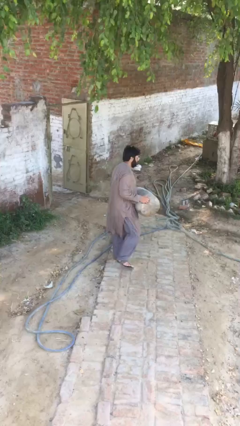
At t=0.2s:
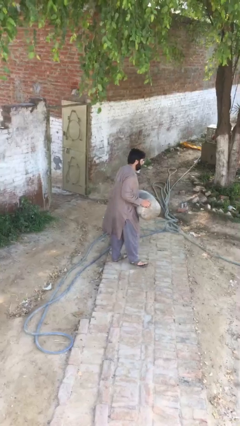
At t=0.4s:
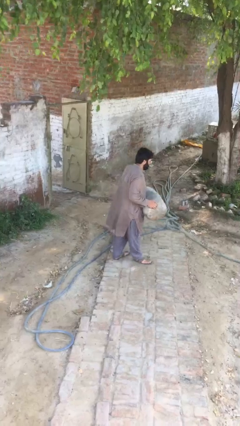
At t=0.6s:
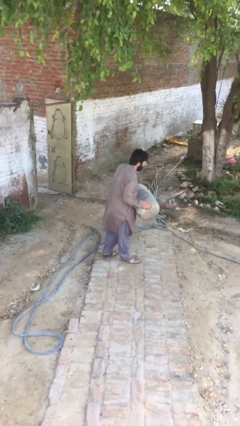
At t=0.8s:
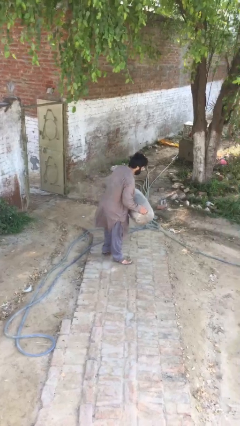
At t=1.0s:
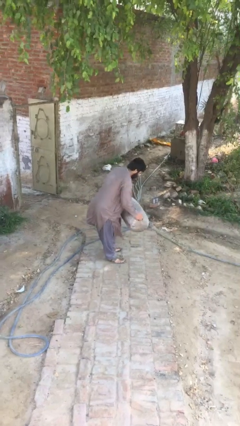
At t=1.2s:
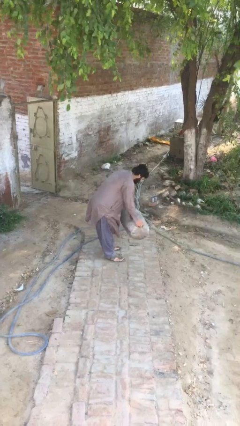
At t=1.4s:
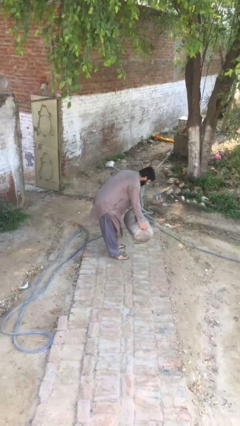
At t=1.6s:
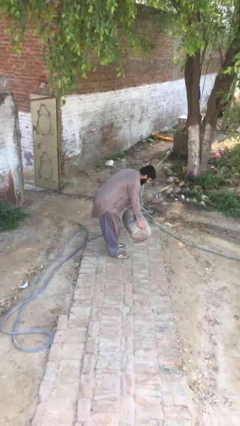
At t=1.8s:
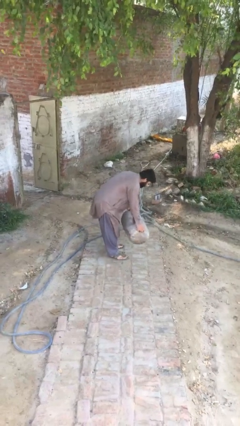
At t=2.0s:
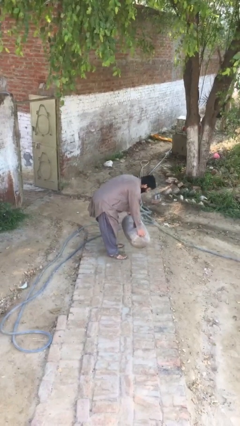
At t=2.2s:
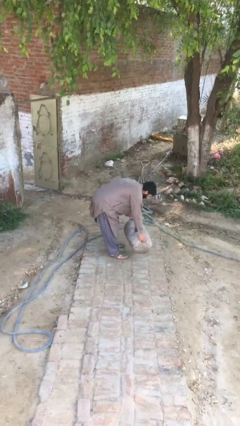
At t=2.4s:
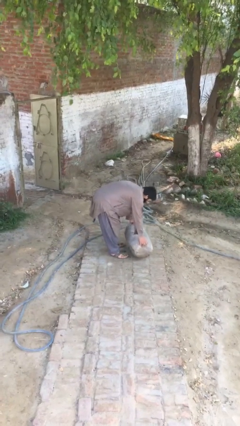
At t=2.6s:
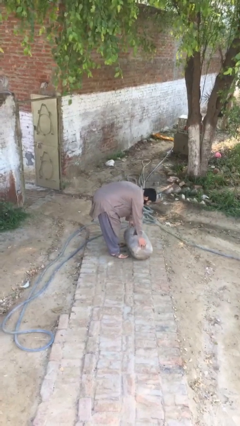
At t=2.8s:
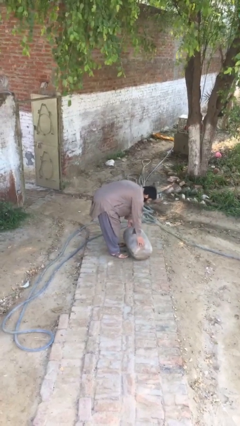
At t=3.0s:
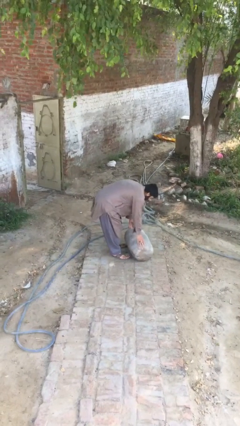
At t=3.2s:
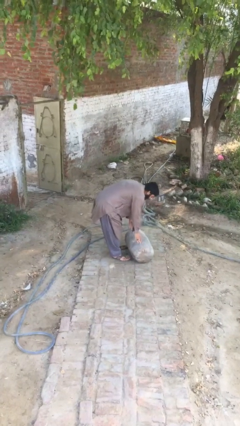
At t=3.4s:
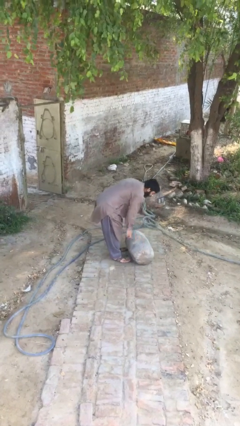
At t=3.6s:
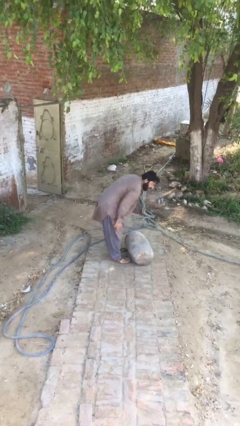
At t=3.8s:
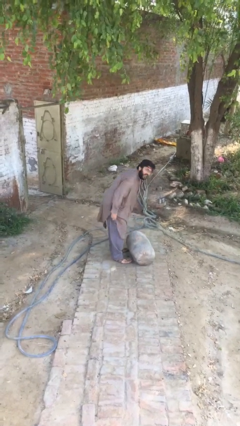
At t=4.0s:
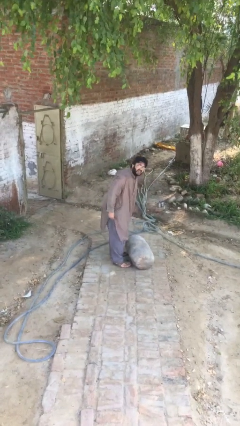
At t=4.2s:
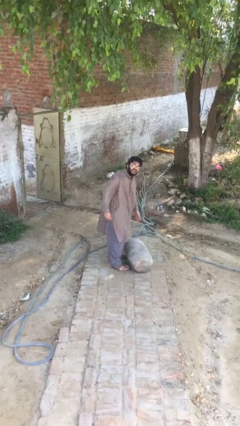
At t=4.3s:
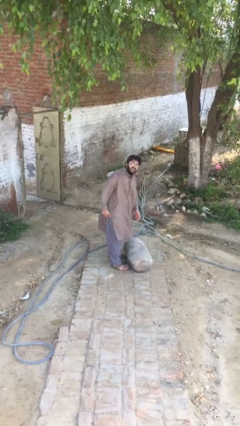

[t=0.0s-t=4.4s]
person puts down object on floor

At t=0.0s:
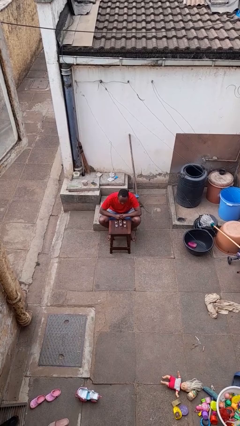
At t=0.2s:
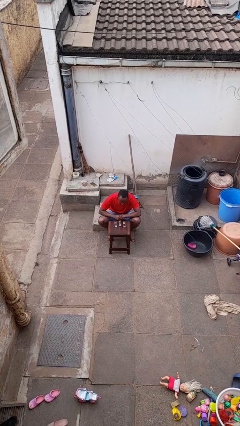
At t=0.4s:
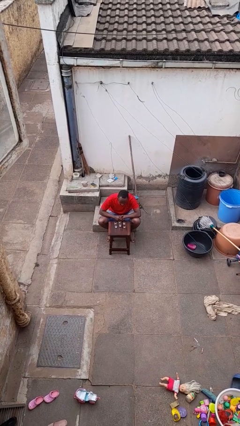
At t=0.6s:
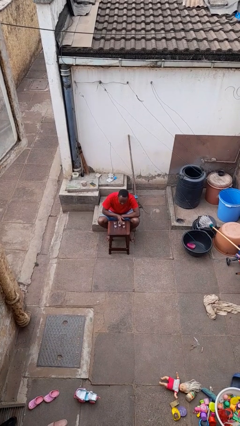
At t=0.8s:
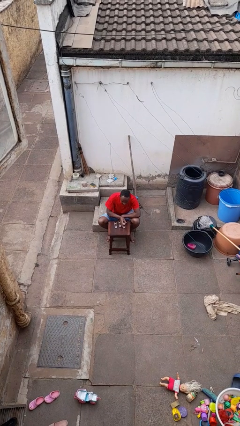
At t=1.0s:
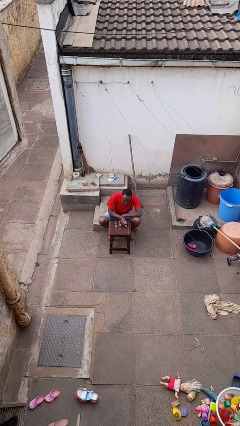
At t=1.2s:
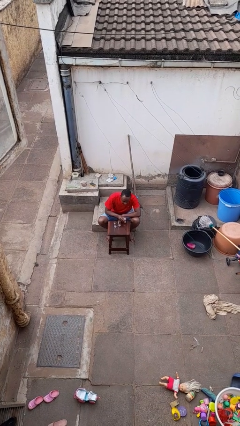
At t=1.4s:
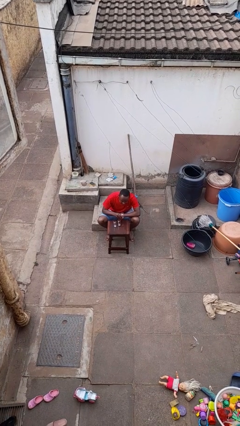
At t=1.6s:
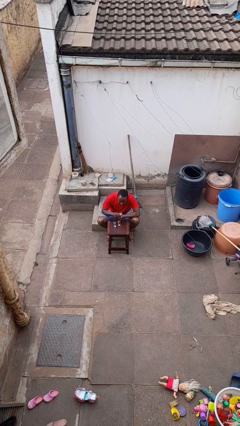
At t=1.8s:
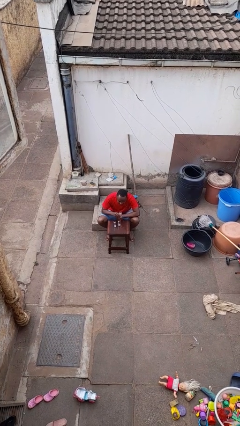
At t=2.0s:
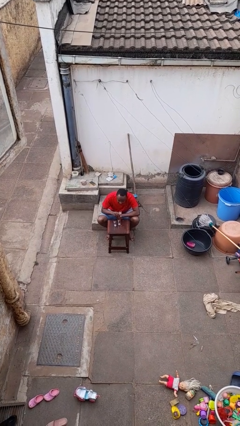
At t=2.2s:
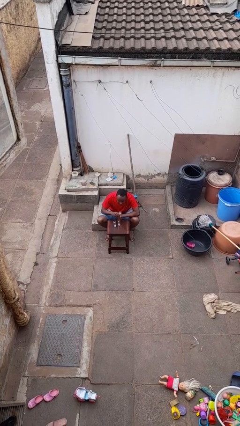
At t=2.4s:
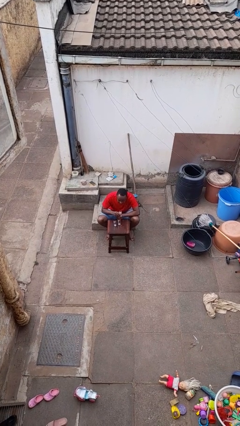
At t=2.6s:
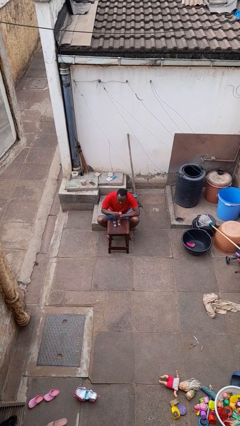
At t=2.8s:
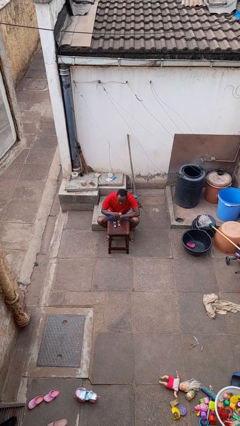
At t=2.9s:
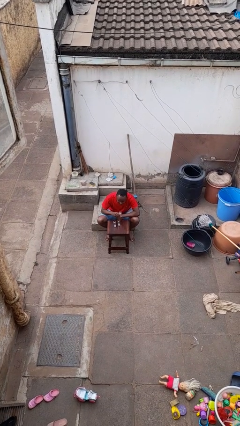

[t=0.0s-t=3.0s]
person picks up object from table

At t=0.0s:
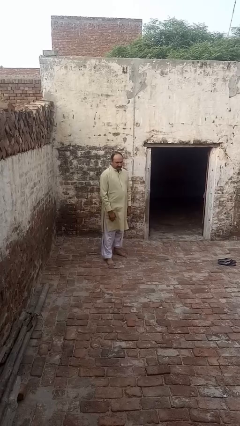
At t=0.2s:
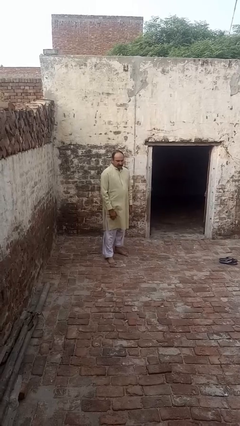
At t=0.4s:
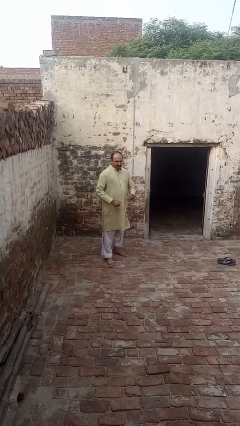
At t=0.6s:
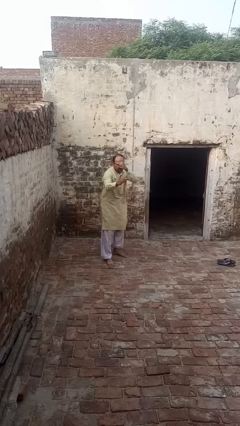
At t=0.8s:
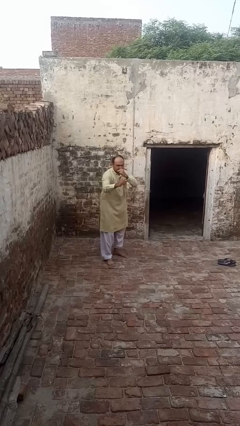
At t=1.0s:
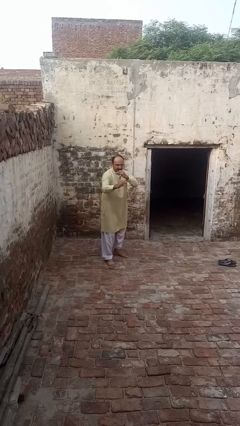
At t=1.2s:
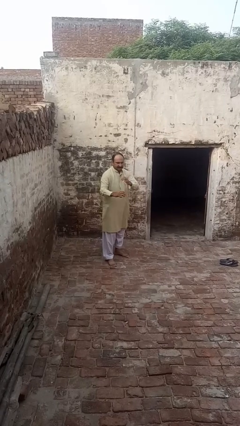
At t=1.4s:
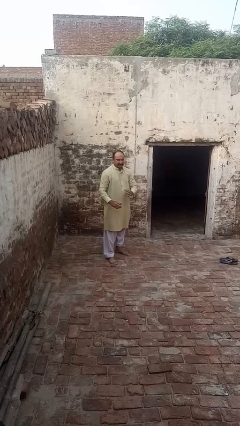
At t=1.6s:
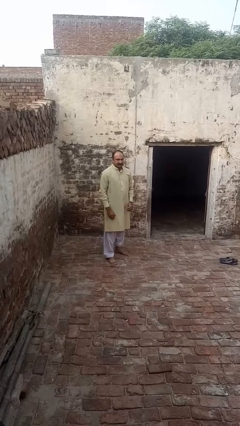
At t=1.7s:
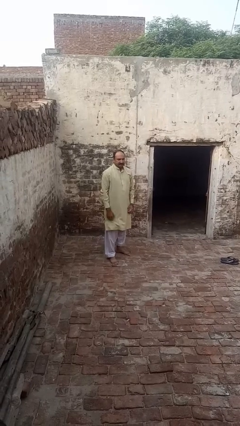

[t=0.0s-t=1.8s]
person karate chop

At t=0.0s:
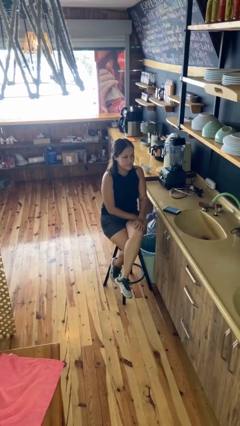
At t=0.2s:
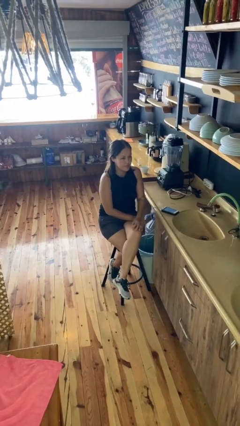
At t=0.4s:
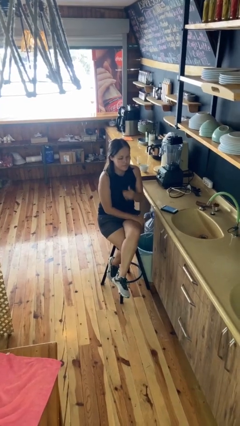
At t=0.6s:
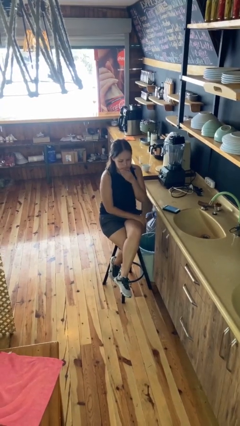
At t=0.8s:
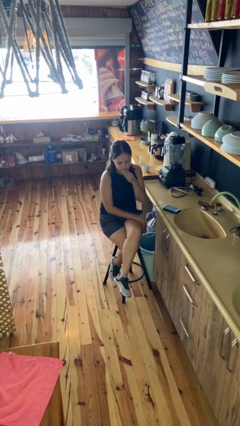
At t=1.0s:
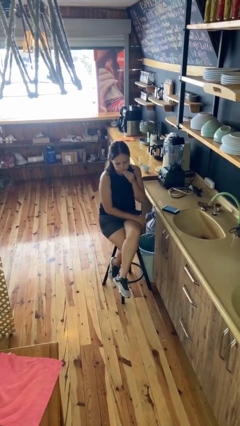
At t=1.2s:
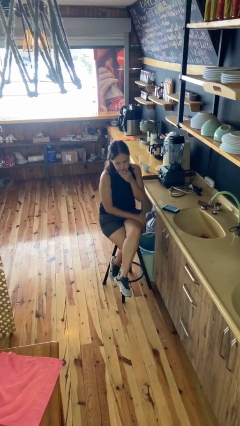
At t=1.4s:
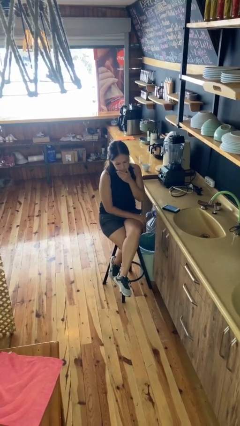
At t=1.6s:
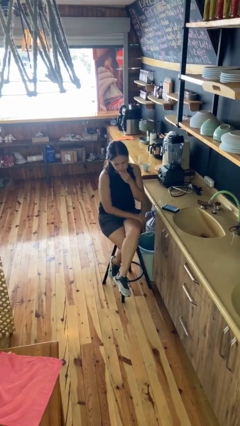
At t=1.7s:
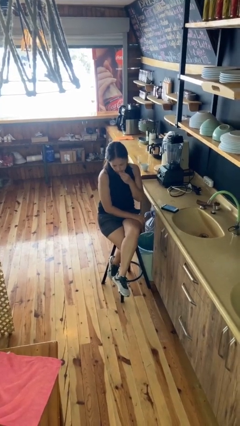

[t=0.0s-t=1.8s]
person strokes chin

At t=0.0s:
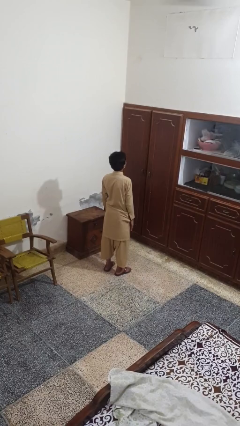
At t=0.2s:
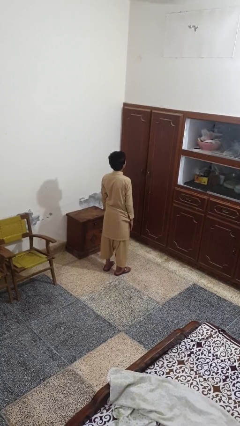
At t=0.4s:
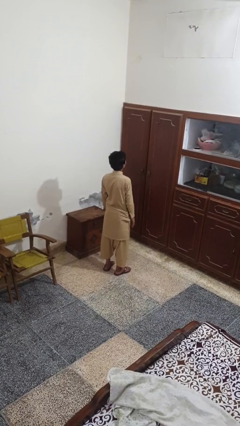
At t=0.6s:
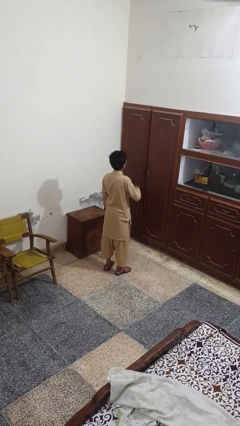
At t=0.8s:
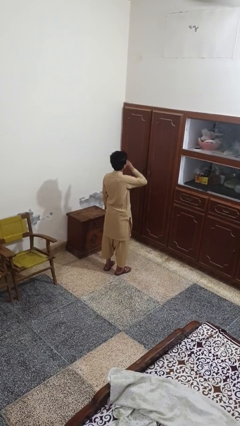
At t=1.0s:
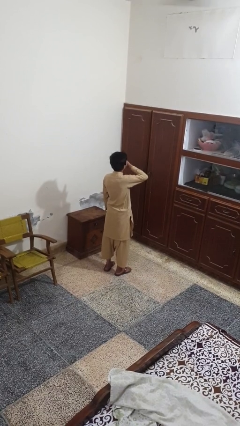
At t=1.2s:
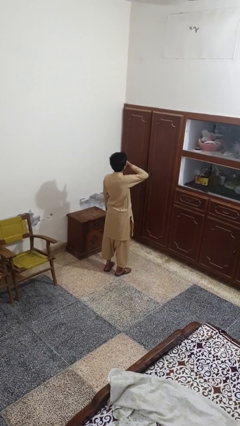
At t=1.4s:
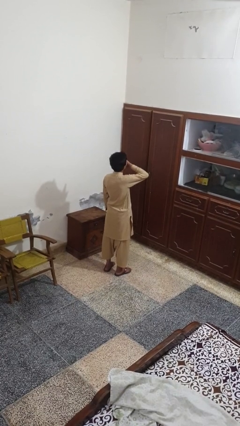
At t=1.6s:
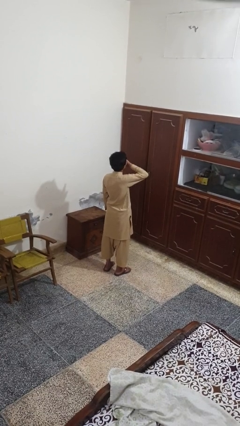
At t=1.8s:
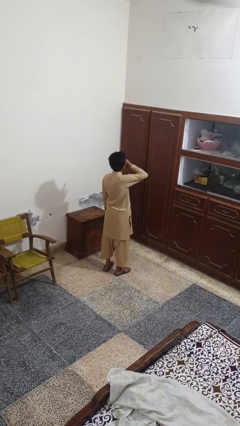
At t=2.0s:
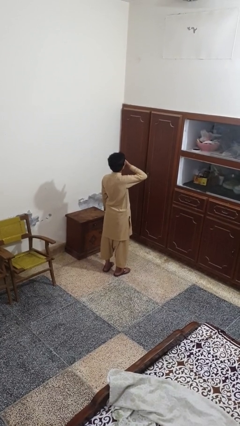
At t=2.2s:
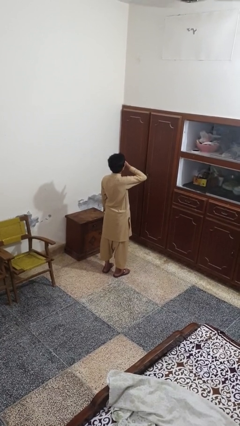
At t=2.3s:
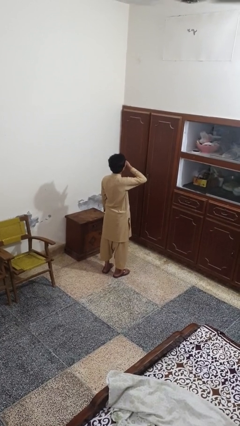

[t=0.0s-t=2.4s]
person yawns

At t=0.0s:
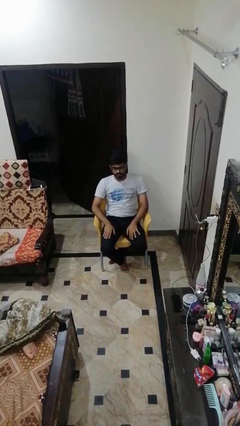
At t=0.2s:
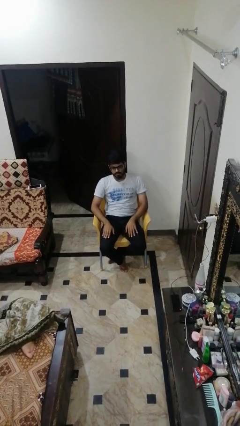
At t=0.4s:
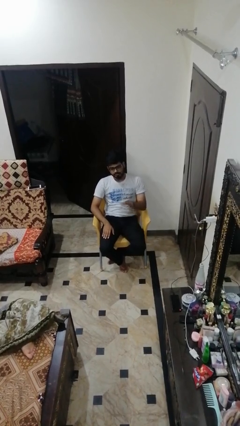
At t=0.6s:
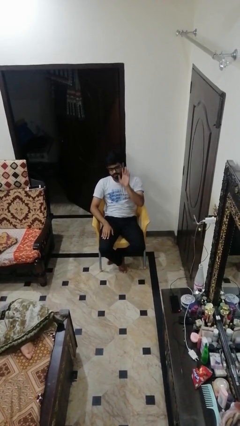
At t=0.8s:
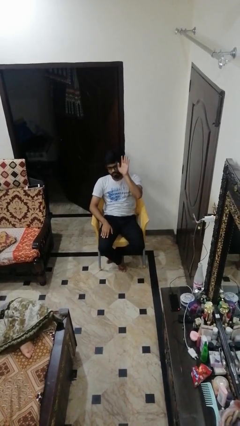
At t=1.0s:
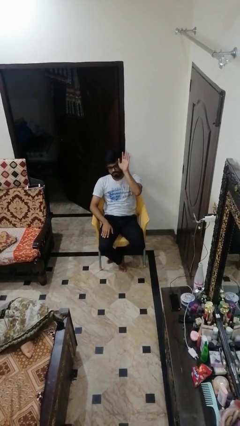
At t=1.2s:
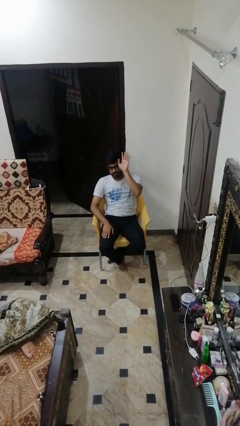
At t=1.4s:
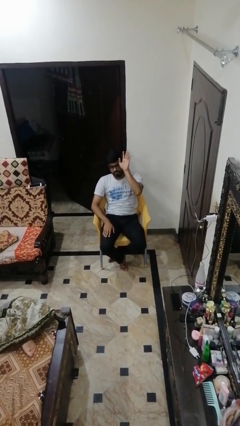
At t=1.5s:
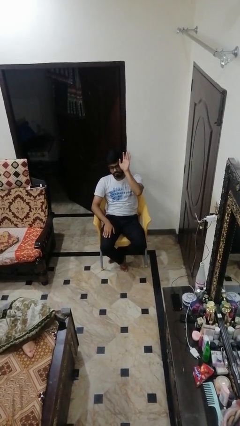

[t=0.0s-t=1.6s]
person gestures raise hand

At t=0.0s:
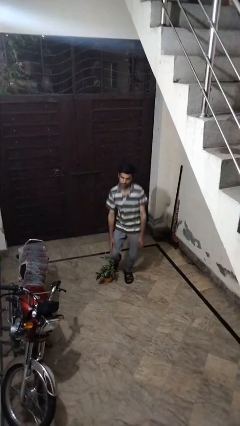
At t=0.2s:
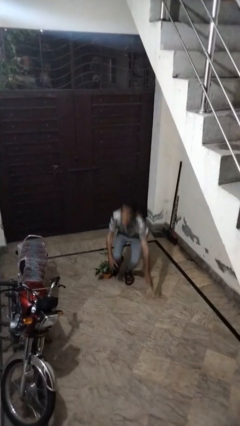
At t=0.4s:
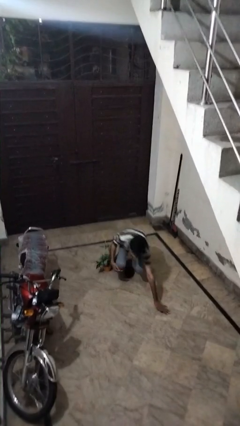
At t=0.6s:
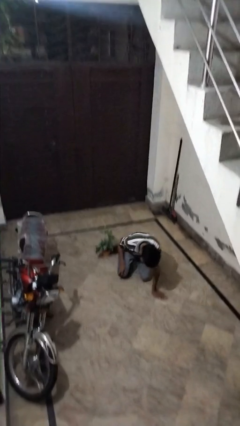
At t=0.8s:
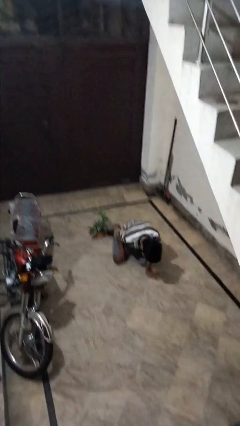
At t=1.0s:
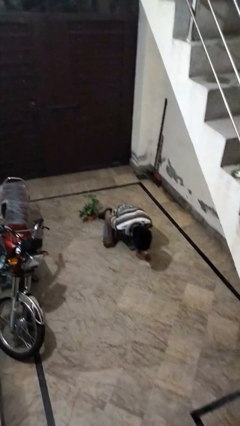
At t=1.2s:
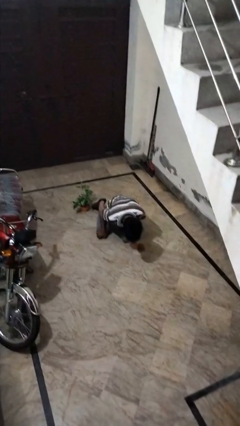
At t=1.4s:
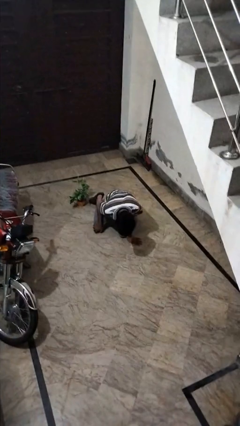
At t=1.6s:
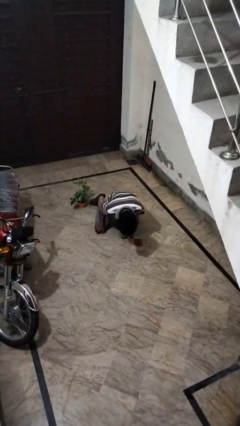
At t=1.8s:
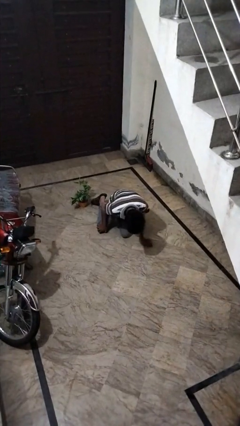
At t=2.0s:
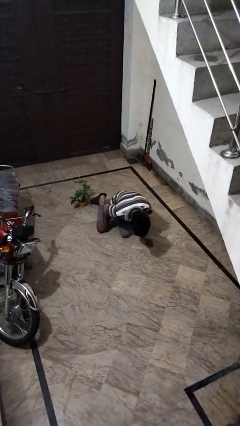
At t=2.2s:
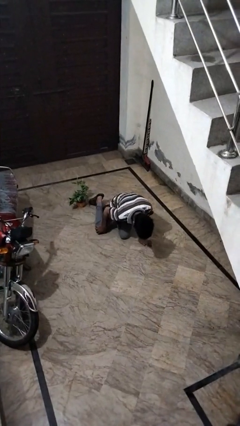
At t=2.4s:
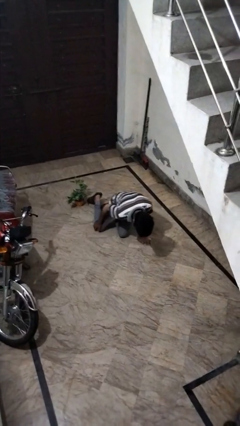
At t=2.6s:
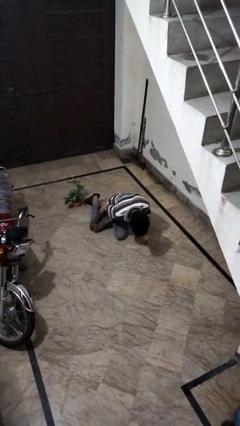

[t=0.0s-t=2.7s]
person trips on object on floor
